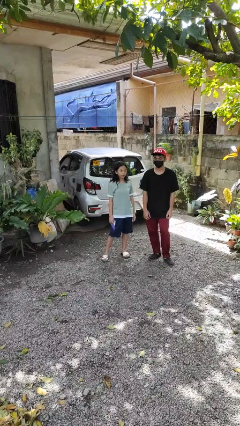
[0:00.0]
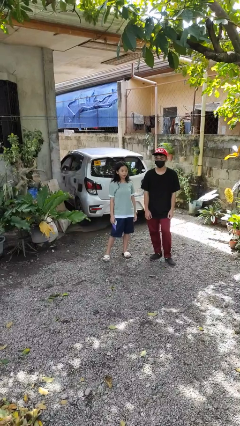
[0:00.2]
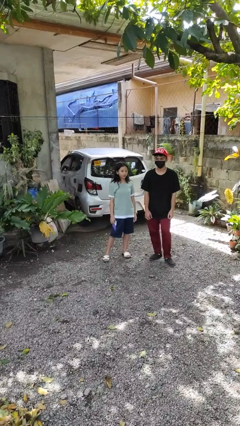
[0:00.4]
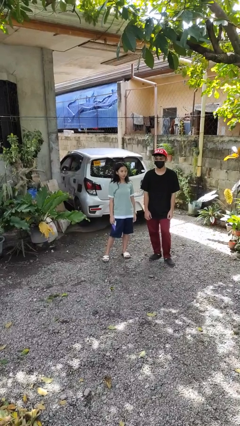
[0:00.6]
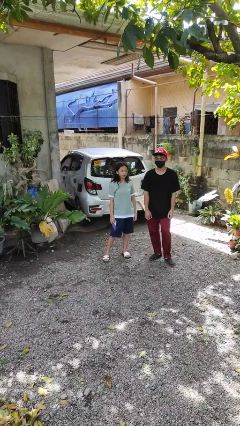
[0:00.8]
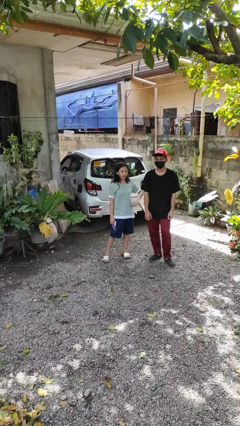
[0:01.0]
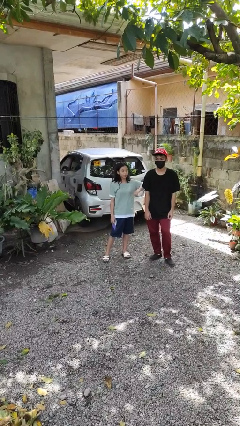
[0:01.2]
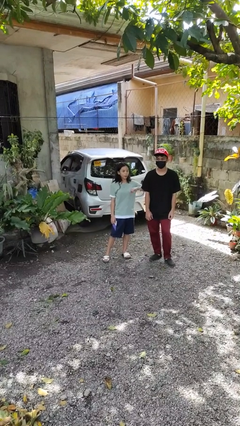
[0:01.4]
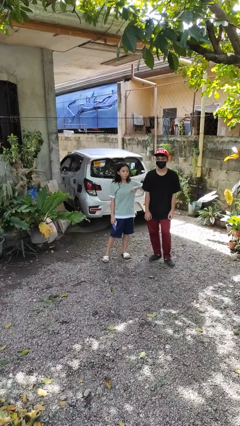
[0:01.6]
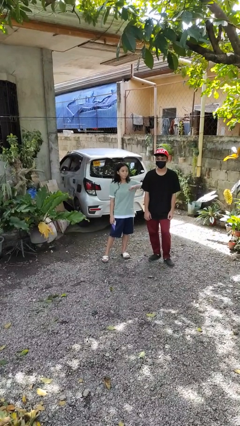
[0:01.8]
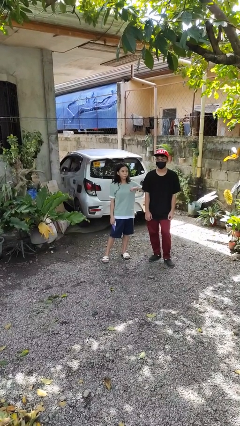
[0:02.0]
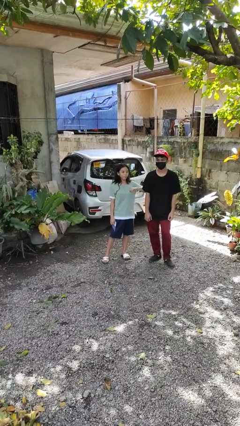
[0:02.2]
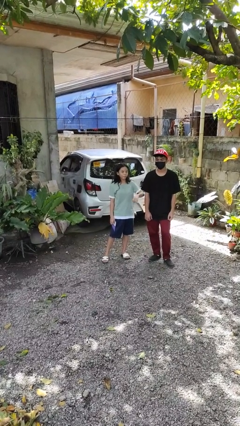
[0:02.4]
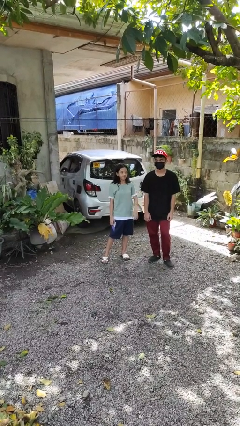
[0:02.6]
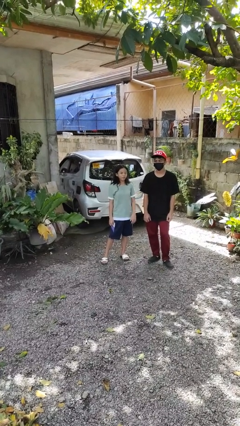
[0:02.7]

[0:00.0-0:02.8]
person nudges person with elbow

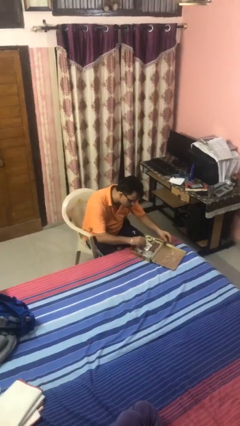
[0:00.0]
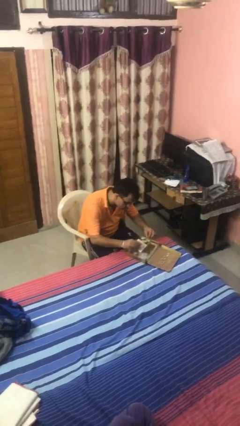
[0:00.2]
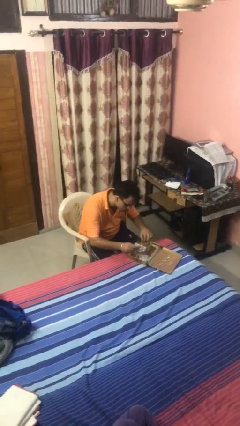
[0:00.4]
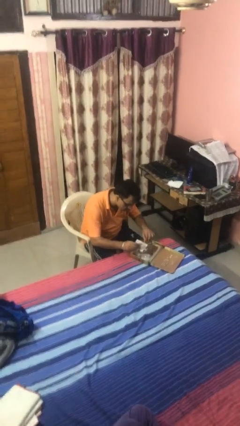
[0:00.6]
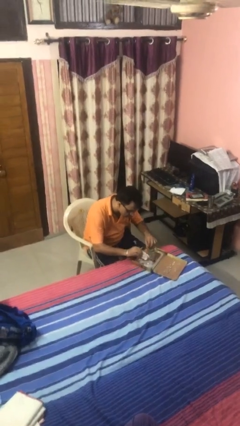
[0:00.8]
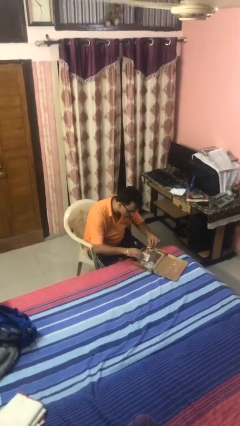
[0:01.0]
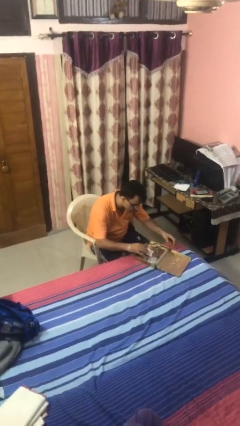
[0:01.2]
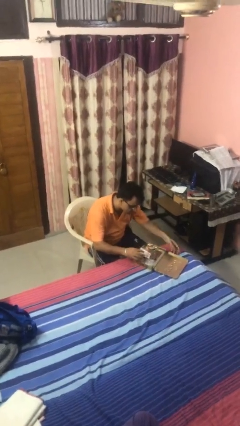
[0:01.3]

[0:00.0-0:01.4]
person searches jewelry box

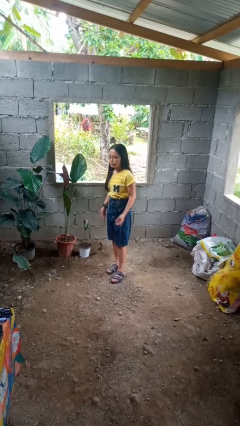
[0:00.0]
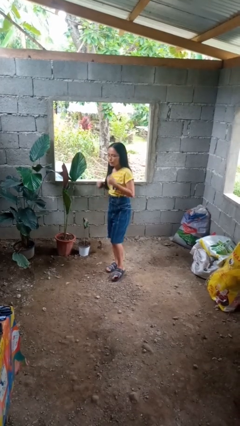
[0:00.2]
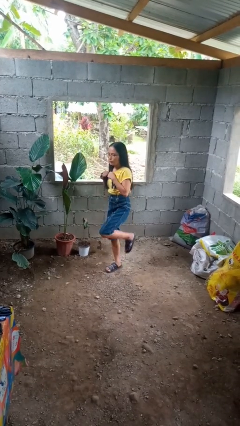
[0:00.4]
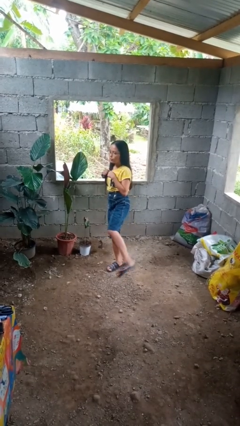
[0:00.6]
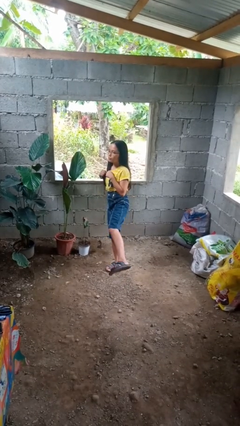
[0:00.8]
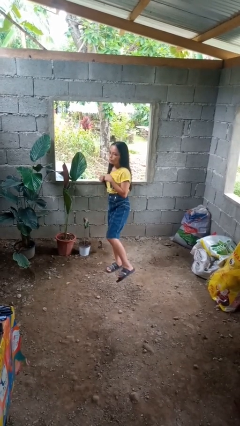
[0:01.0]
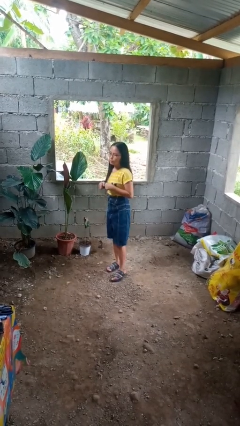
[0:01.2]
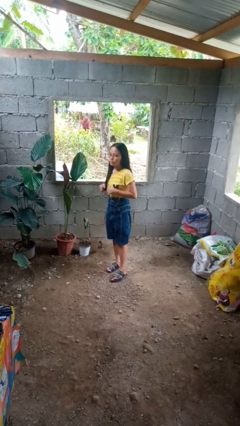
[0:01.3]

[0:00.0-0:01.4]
person karate kicks

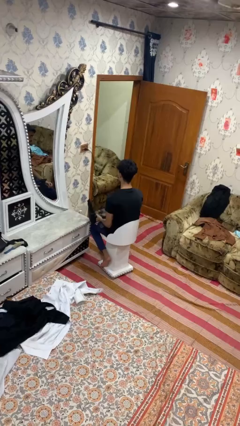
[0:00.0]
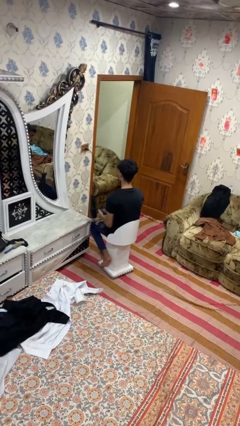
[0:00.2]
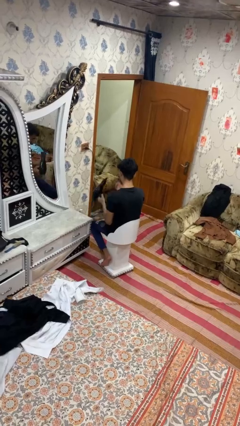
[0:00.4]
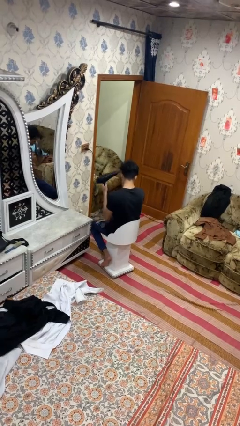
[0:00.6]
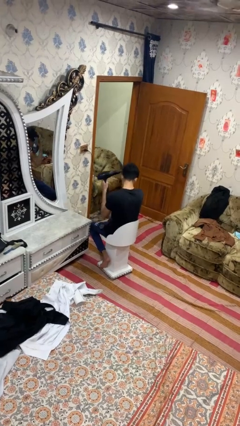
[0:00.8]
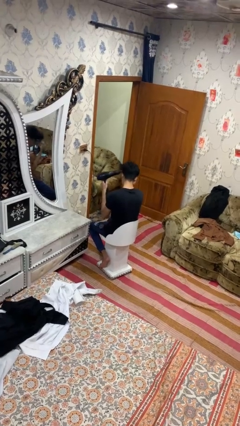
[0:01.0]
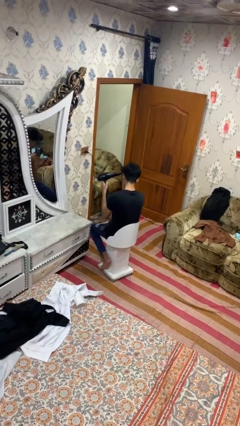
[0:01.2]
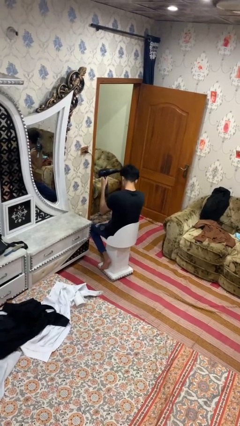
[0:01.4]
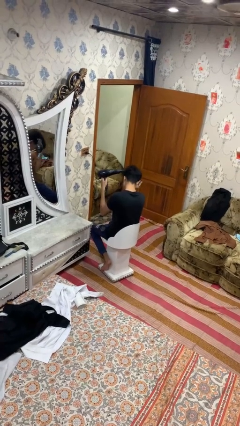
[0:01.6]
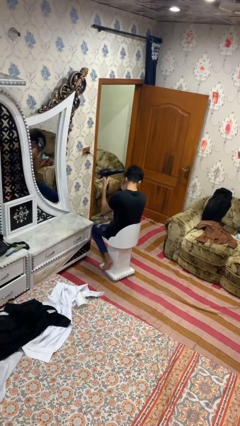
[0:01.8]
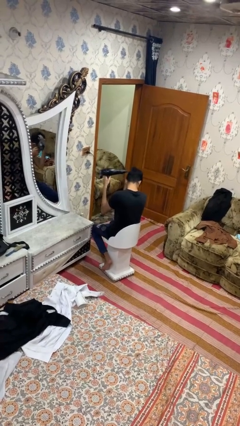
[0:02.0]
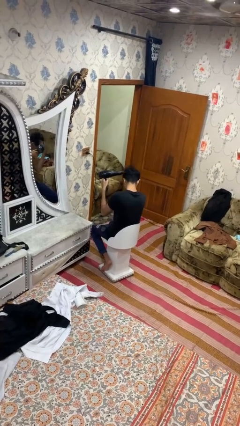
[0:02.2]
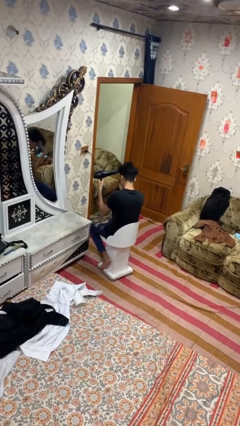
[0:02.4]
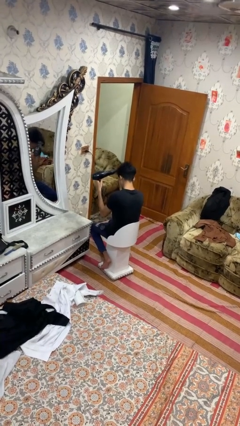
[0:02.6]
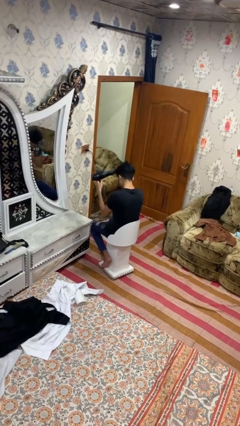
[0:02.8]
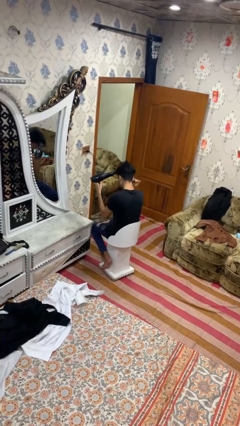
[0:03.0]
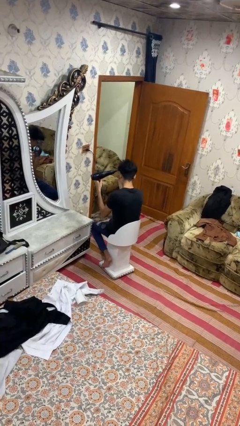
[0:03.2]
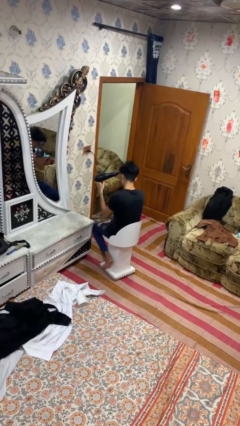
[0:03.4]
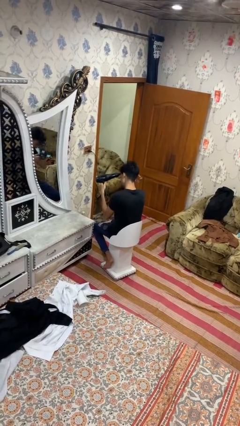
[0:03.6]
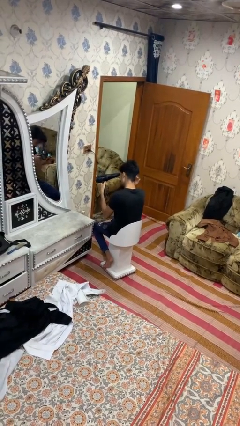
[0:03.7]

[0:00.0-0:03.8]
person dries hair with hairdryer

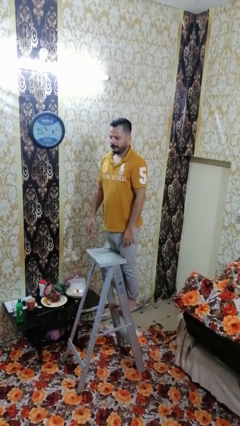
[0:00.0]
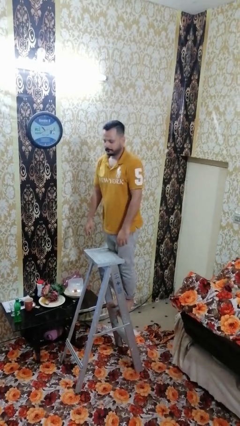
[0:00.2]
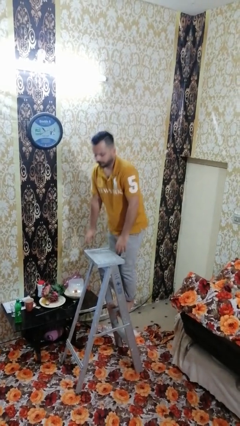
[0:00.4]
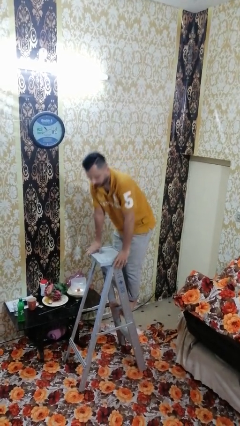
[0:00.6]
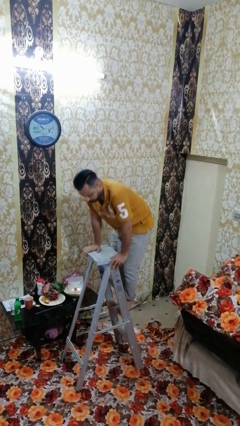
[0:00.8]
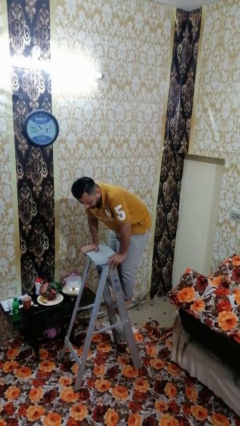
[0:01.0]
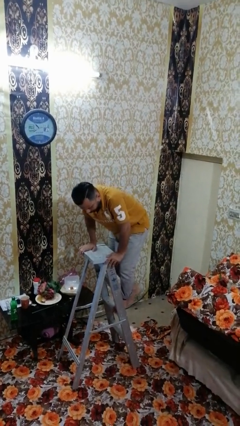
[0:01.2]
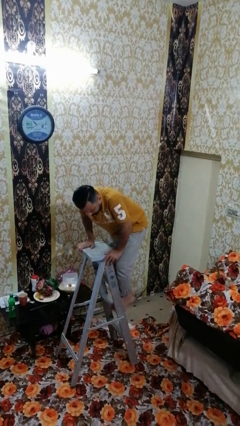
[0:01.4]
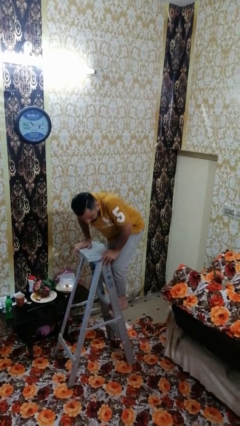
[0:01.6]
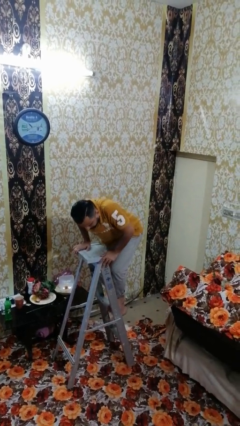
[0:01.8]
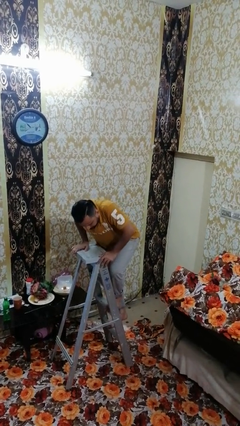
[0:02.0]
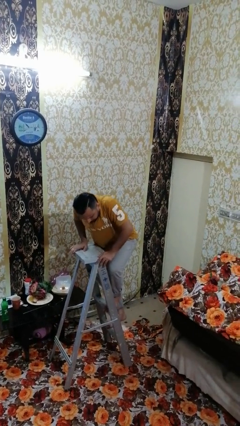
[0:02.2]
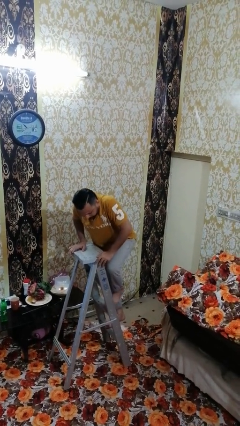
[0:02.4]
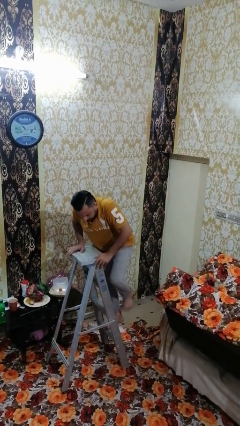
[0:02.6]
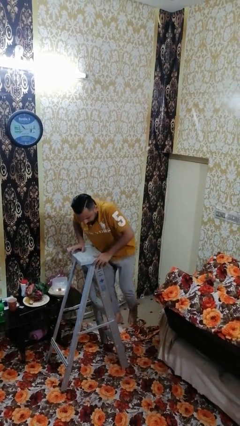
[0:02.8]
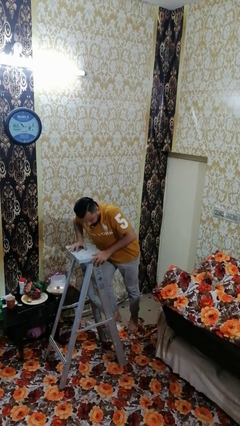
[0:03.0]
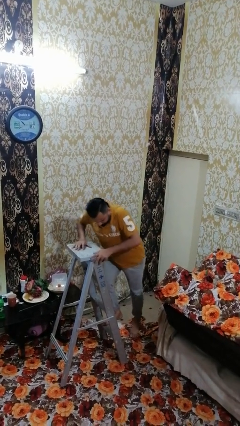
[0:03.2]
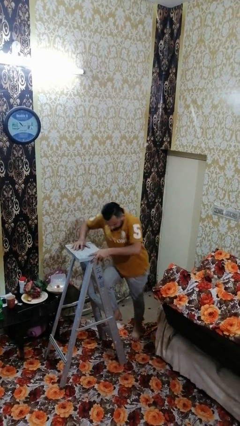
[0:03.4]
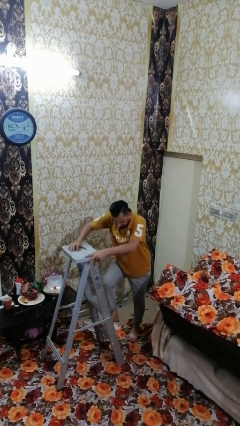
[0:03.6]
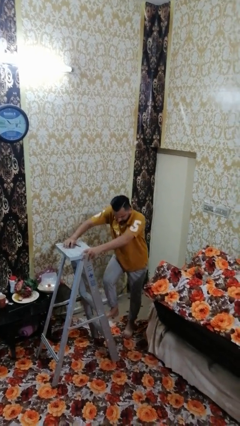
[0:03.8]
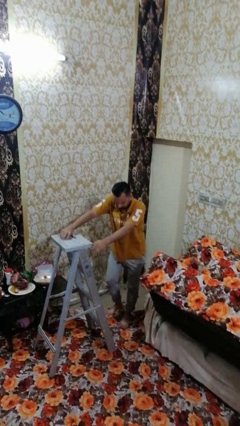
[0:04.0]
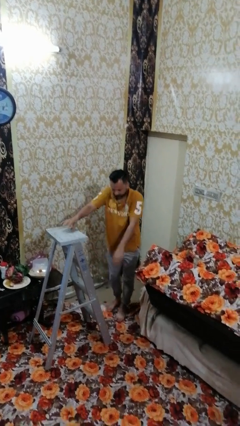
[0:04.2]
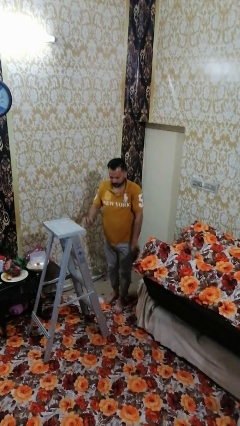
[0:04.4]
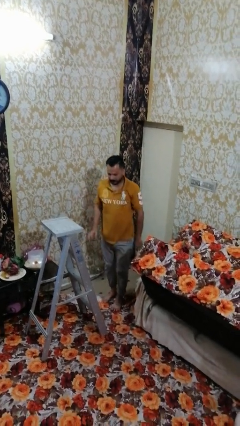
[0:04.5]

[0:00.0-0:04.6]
person climbs down ladder

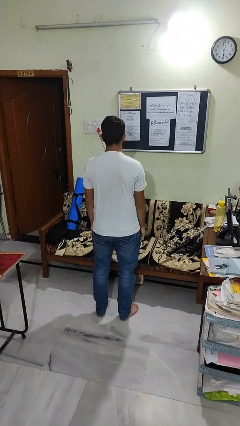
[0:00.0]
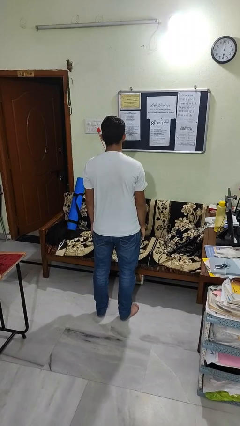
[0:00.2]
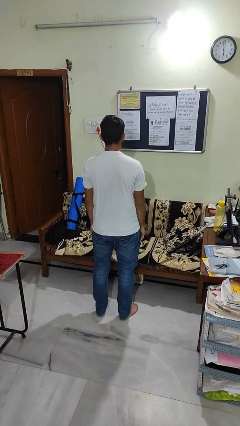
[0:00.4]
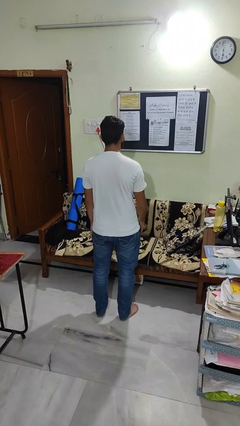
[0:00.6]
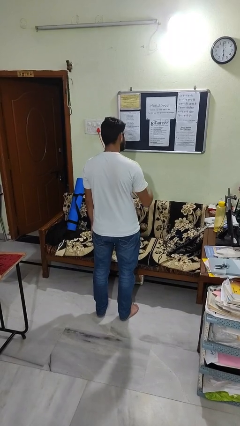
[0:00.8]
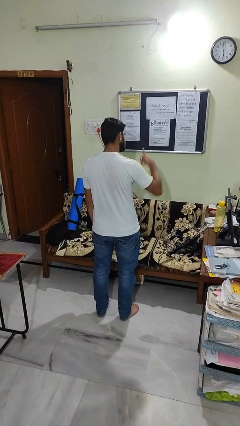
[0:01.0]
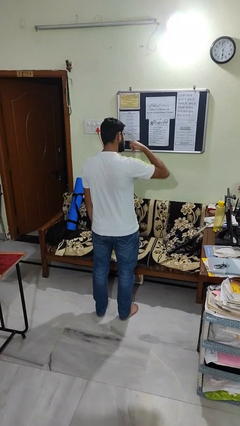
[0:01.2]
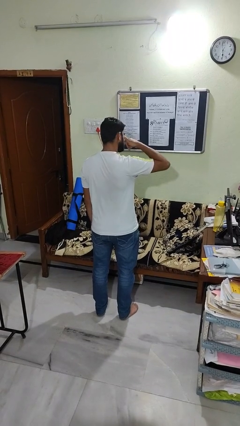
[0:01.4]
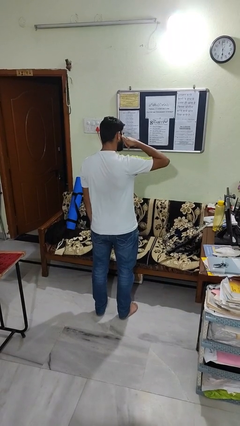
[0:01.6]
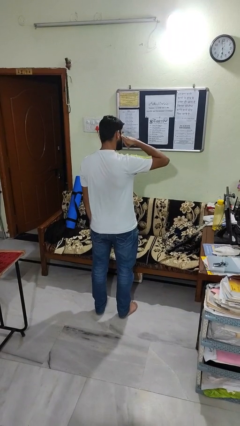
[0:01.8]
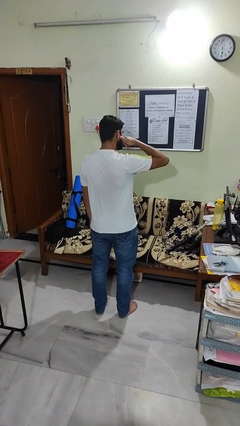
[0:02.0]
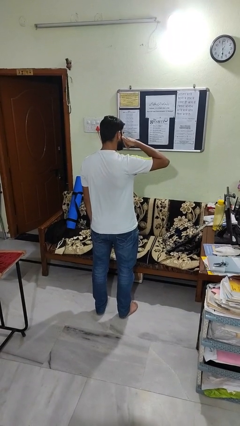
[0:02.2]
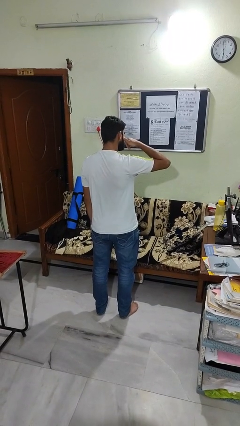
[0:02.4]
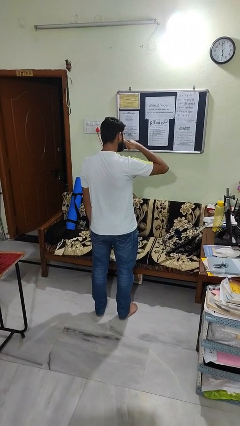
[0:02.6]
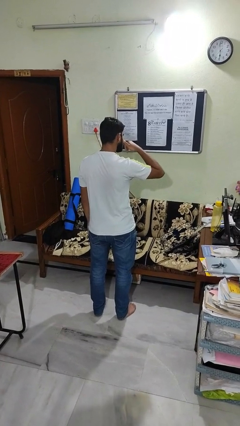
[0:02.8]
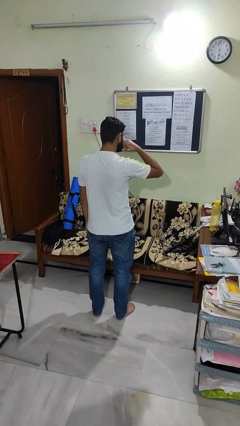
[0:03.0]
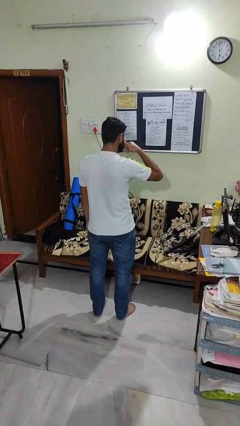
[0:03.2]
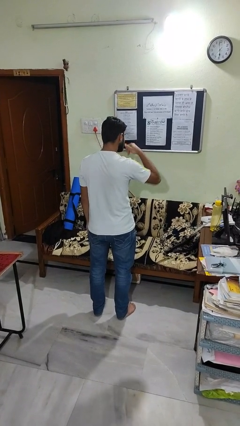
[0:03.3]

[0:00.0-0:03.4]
person gestures call me
